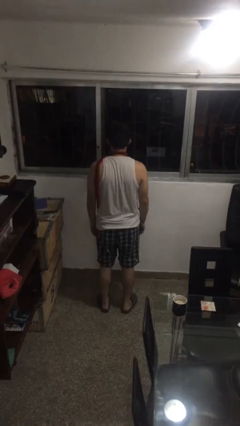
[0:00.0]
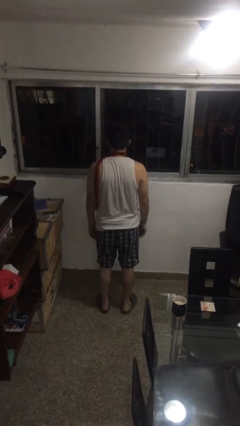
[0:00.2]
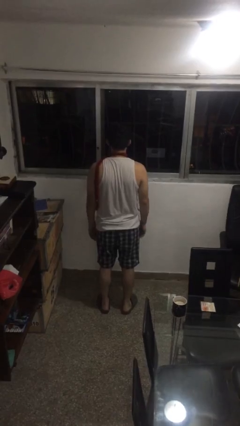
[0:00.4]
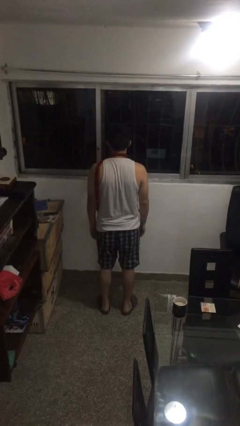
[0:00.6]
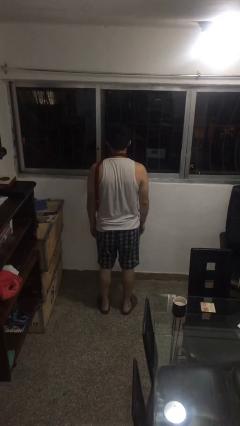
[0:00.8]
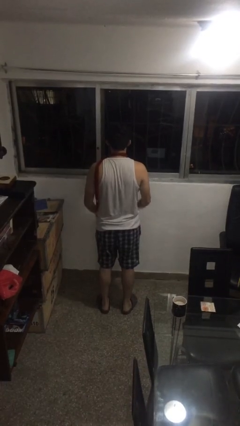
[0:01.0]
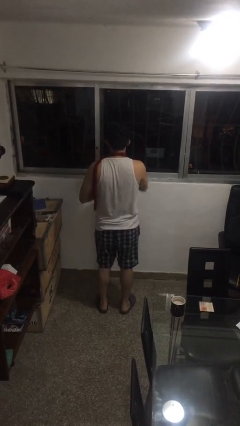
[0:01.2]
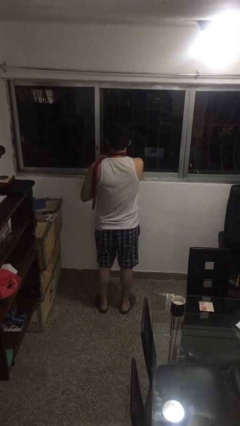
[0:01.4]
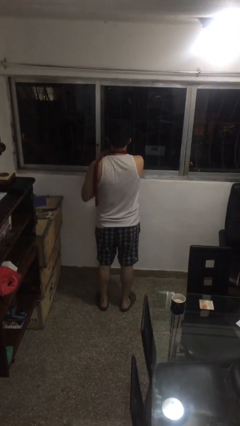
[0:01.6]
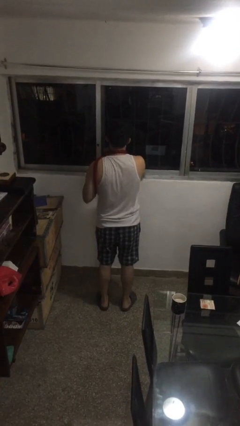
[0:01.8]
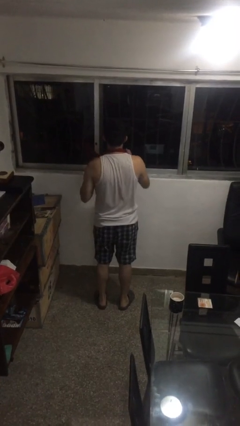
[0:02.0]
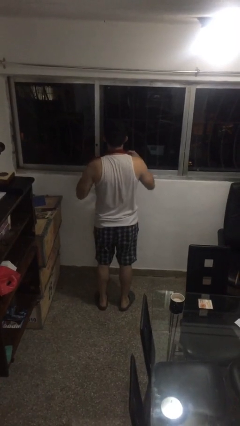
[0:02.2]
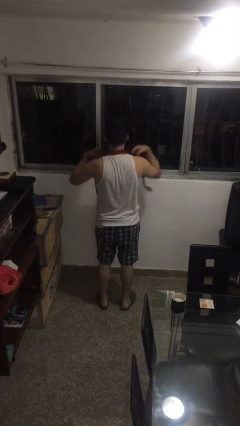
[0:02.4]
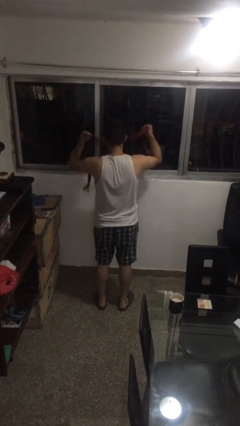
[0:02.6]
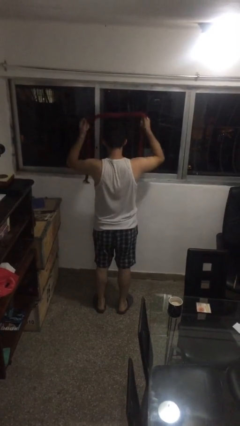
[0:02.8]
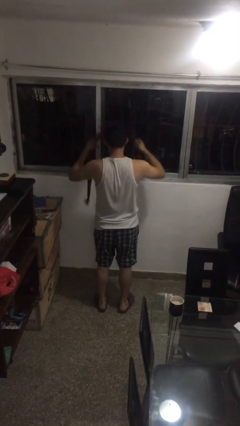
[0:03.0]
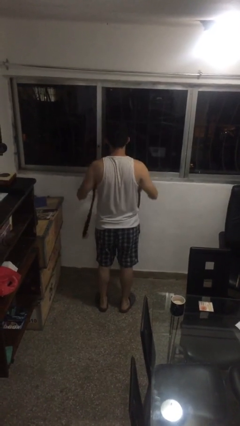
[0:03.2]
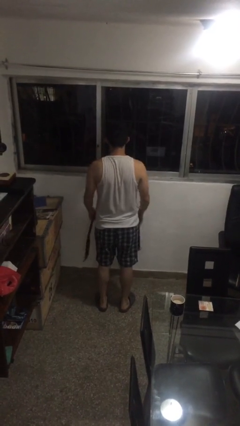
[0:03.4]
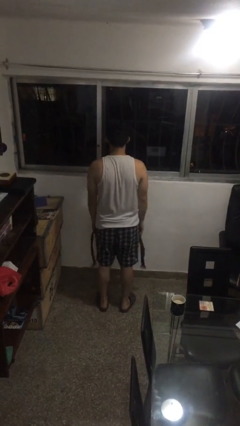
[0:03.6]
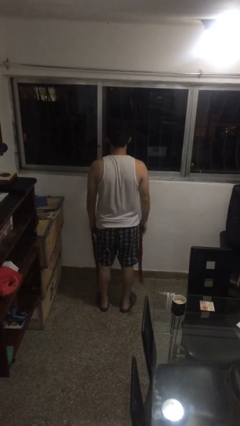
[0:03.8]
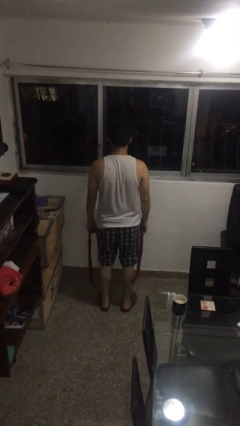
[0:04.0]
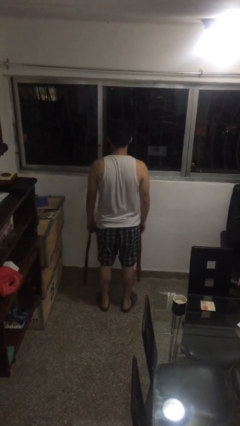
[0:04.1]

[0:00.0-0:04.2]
person takes off scarf

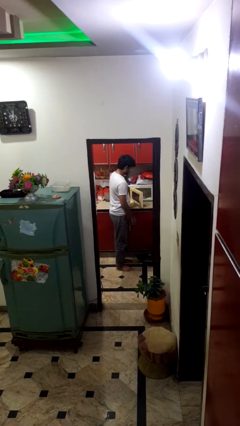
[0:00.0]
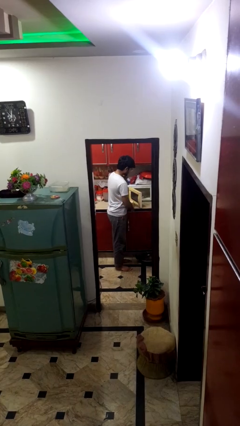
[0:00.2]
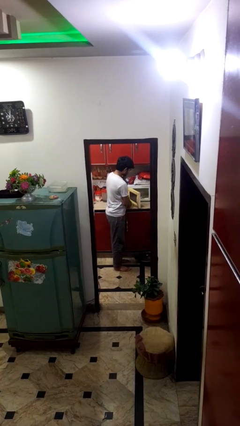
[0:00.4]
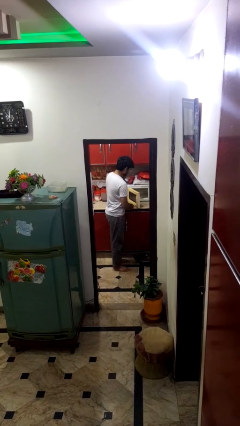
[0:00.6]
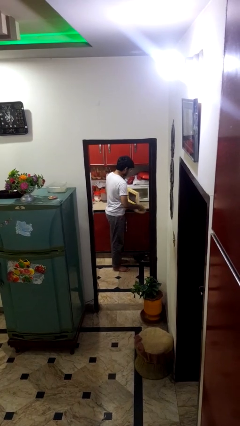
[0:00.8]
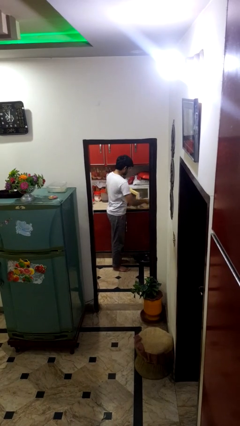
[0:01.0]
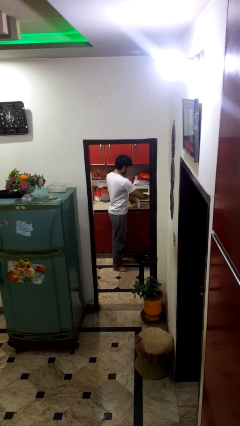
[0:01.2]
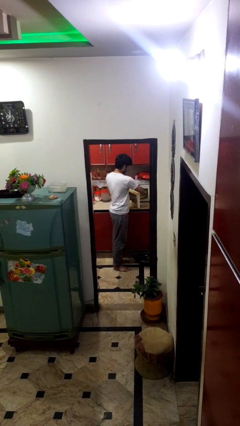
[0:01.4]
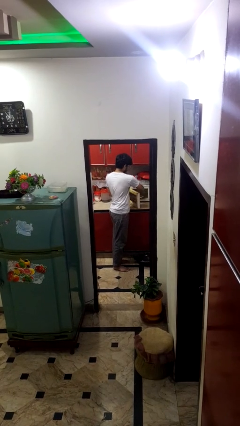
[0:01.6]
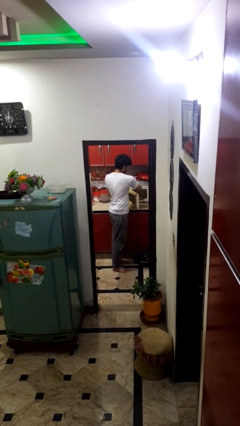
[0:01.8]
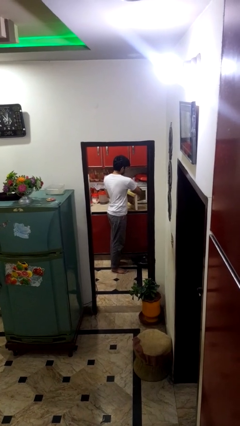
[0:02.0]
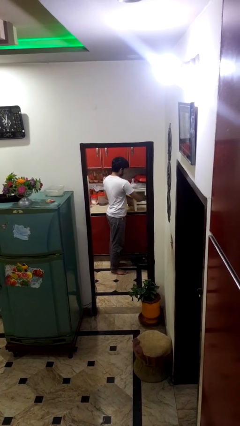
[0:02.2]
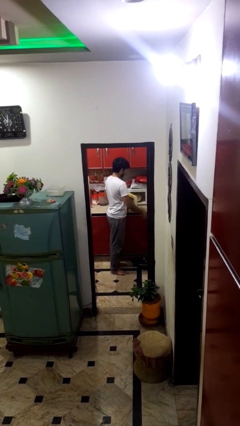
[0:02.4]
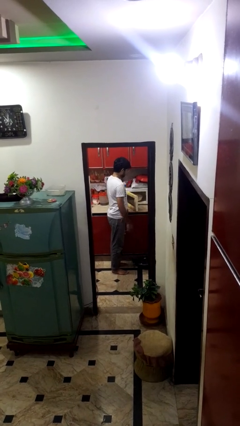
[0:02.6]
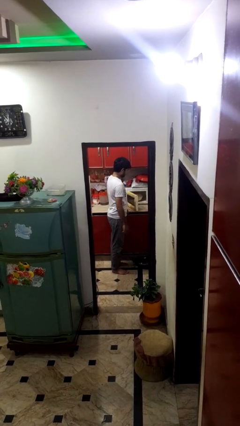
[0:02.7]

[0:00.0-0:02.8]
person puts object into microwave

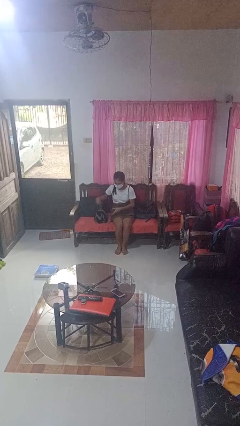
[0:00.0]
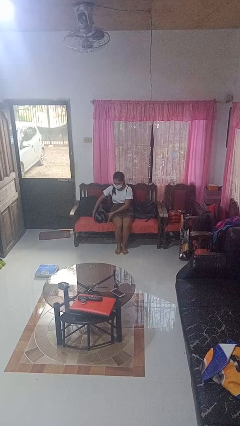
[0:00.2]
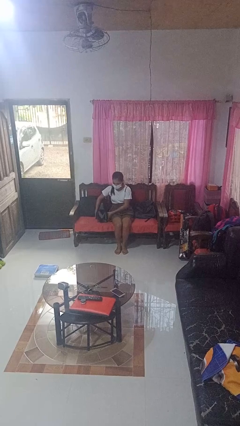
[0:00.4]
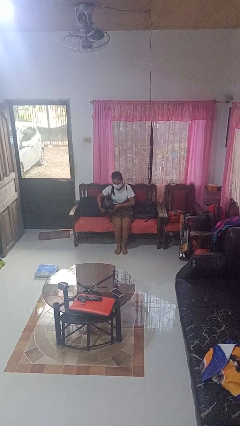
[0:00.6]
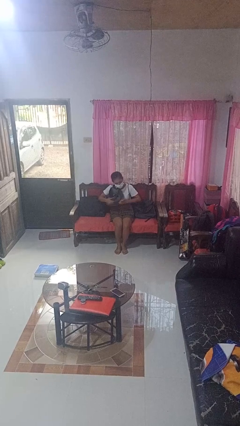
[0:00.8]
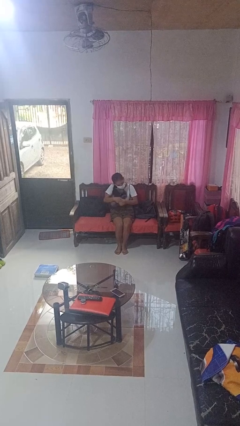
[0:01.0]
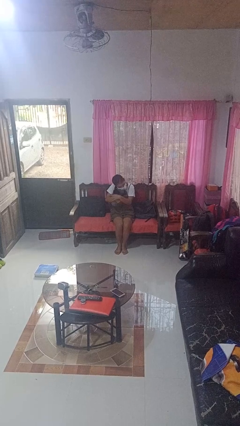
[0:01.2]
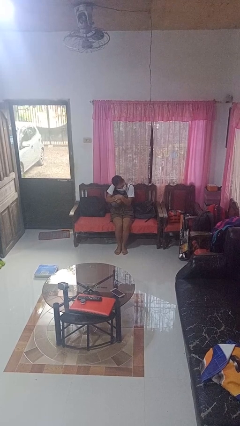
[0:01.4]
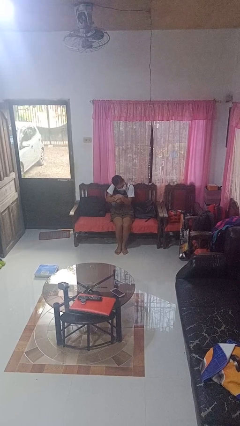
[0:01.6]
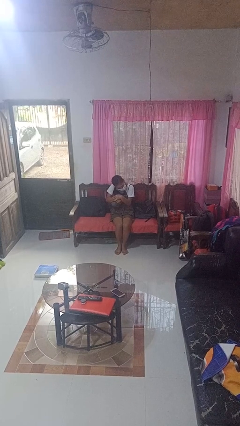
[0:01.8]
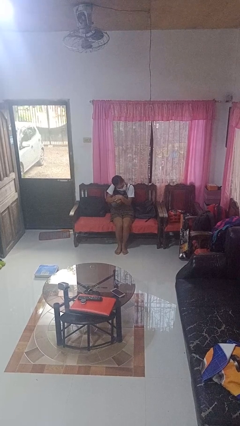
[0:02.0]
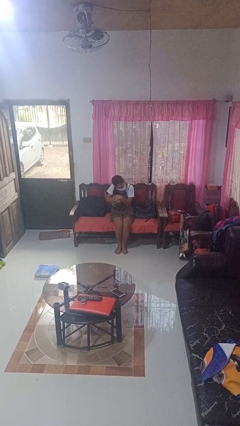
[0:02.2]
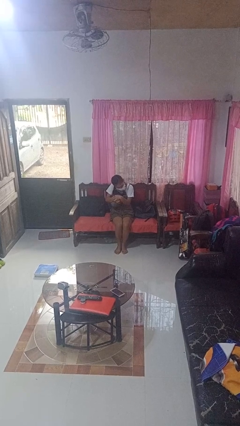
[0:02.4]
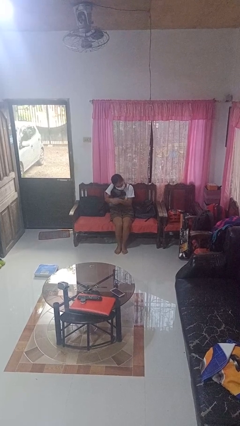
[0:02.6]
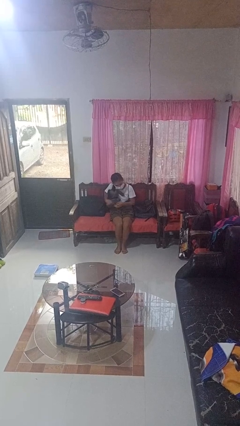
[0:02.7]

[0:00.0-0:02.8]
person hugs stuffed animal

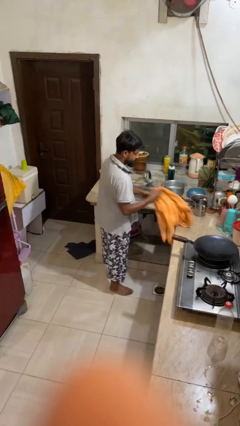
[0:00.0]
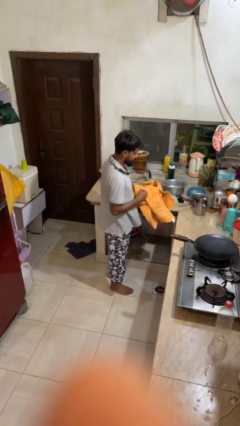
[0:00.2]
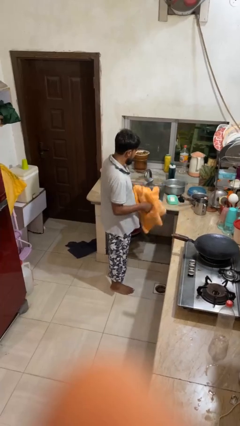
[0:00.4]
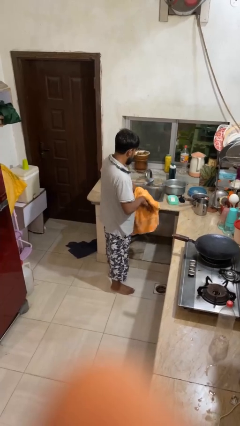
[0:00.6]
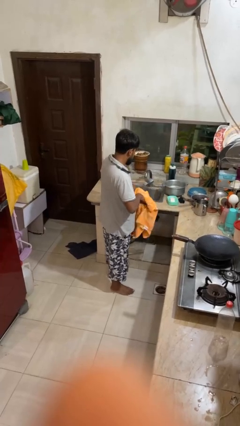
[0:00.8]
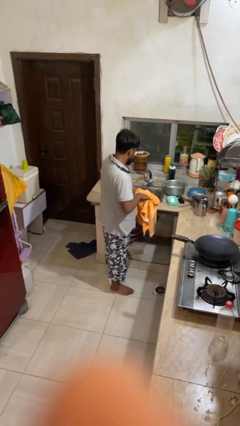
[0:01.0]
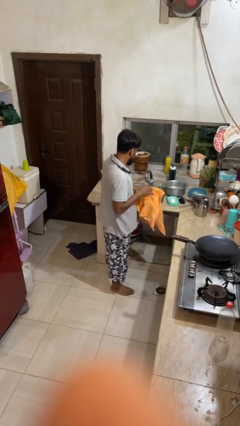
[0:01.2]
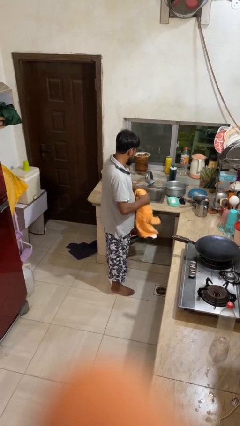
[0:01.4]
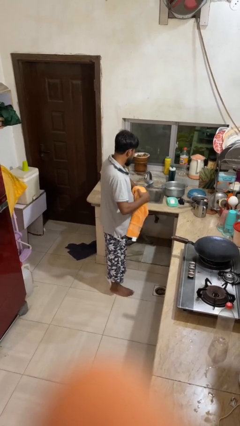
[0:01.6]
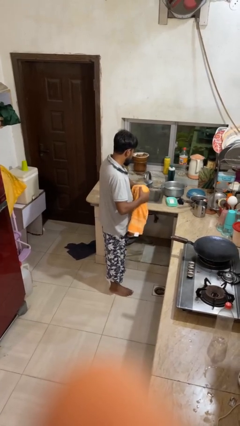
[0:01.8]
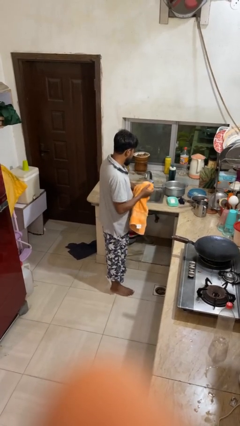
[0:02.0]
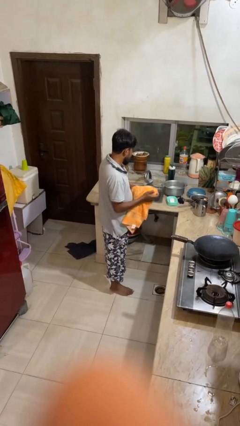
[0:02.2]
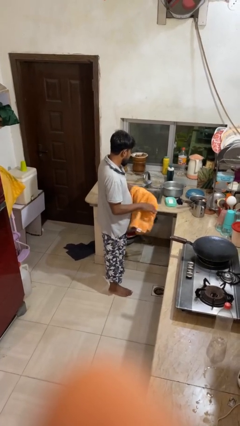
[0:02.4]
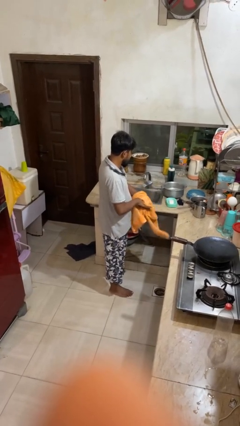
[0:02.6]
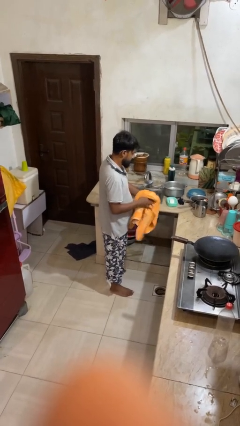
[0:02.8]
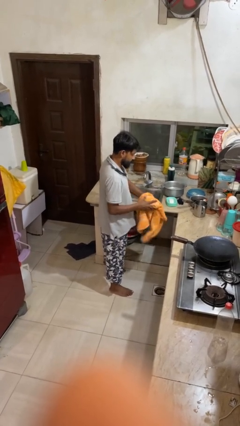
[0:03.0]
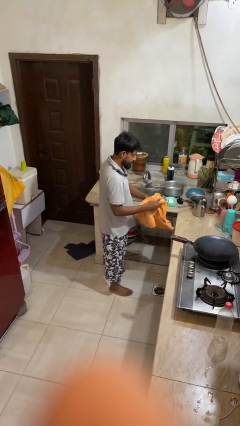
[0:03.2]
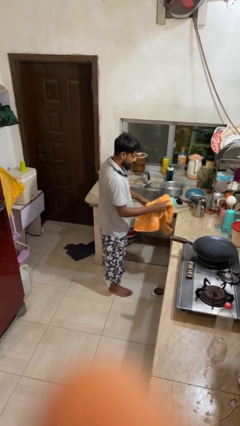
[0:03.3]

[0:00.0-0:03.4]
person dries hands with towel

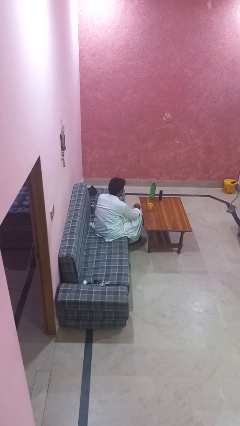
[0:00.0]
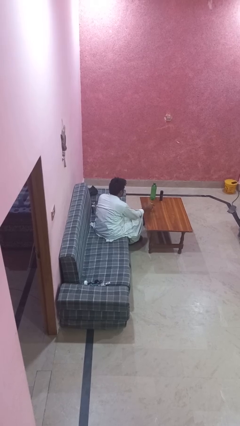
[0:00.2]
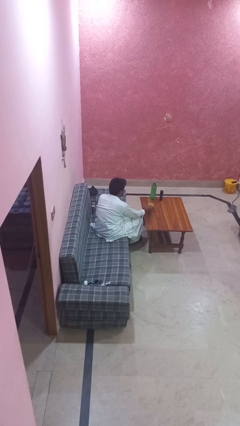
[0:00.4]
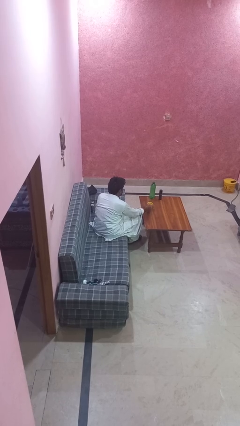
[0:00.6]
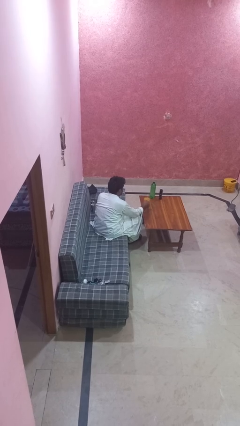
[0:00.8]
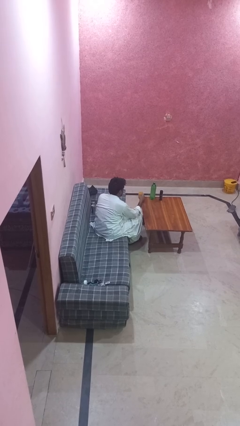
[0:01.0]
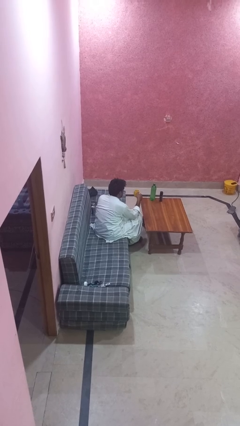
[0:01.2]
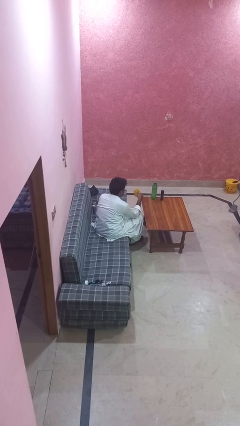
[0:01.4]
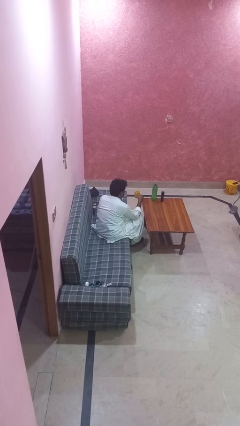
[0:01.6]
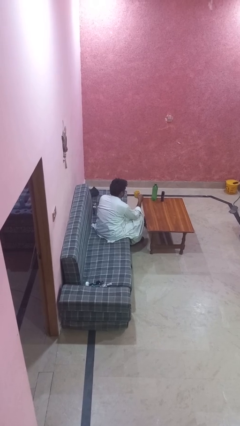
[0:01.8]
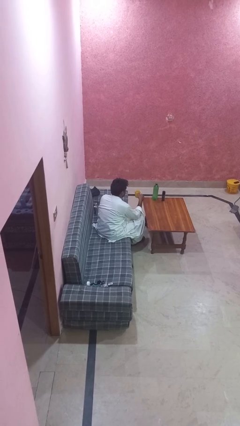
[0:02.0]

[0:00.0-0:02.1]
person picks up object from table

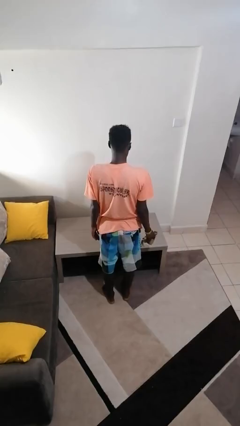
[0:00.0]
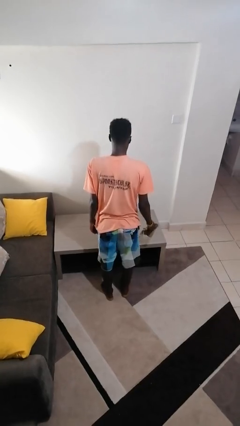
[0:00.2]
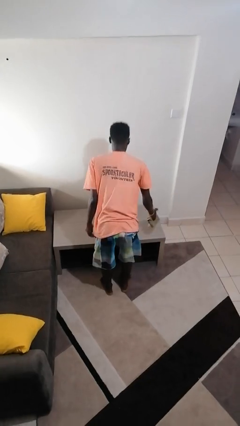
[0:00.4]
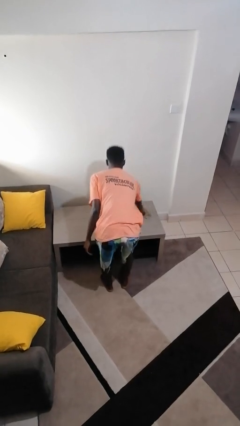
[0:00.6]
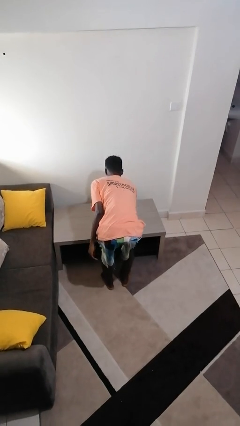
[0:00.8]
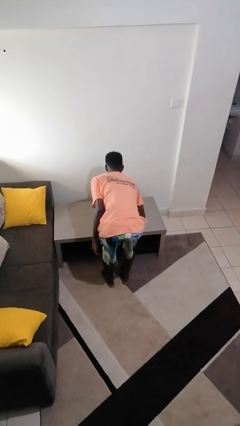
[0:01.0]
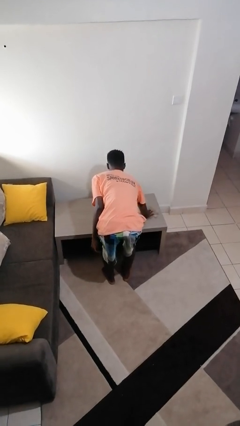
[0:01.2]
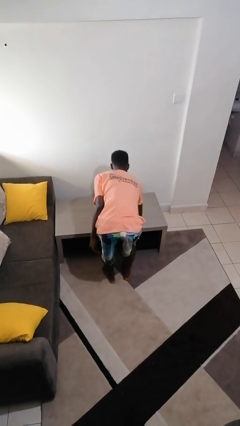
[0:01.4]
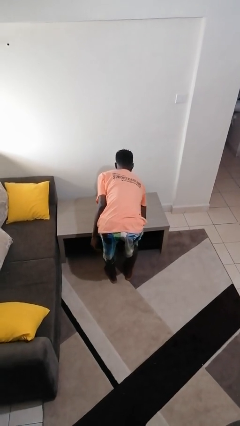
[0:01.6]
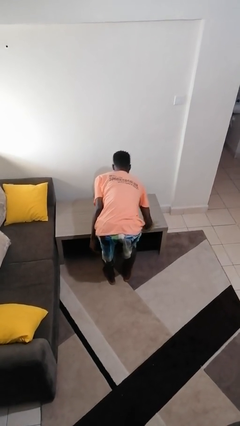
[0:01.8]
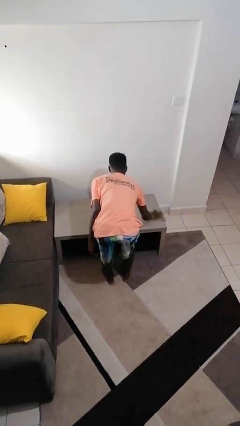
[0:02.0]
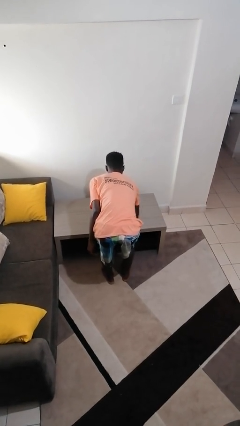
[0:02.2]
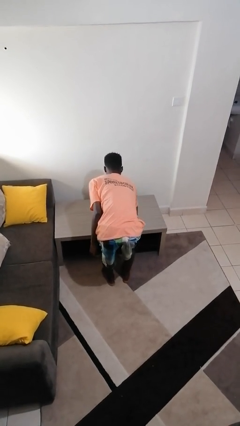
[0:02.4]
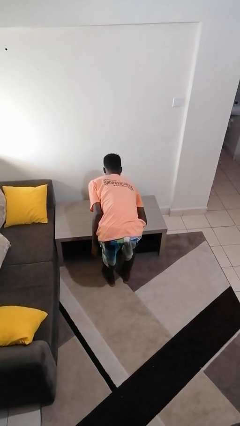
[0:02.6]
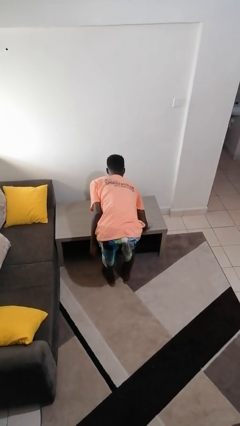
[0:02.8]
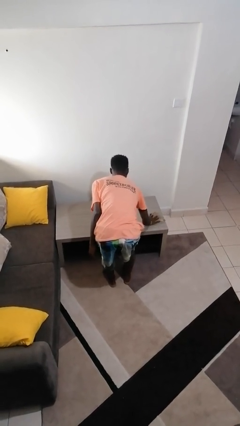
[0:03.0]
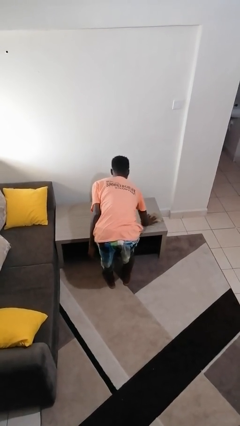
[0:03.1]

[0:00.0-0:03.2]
person cleans table with rag
